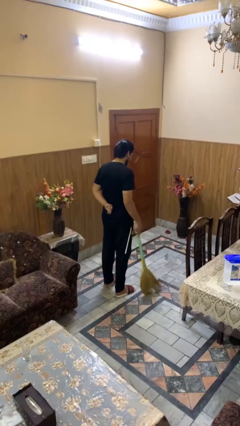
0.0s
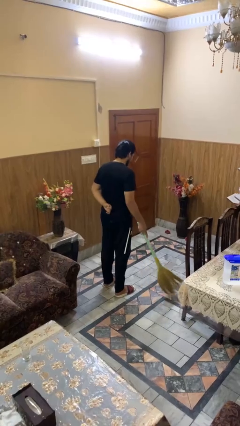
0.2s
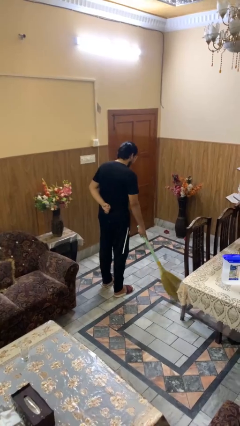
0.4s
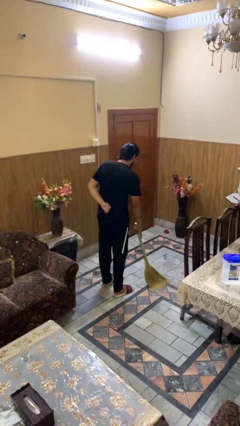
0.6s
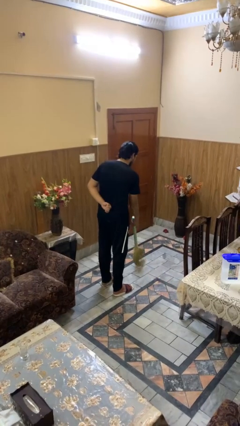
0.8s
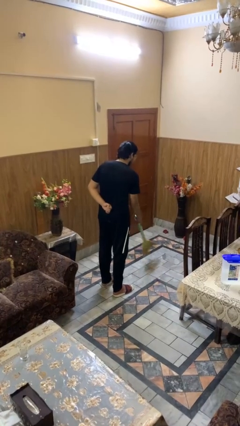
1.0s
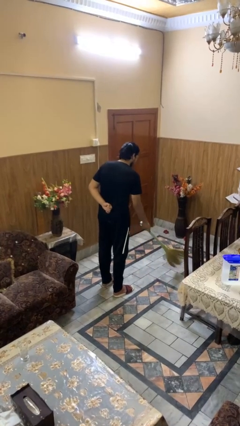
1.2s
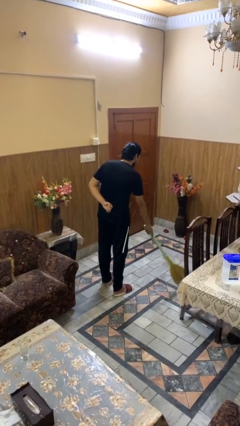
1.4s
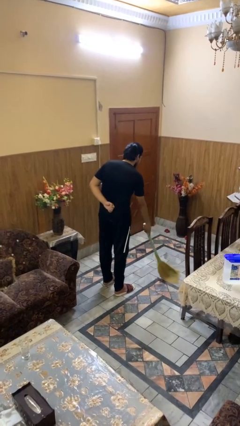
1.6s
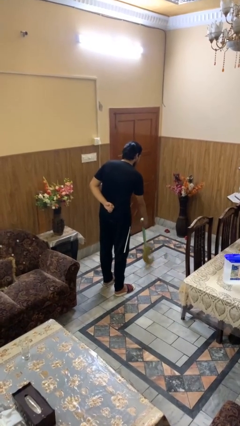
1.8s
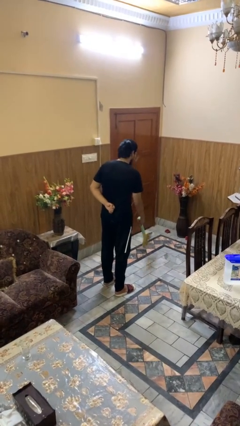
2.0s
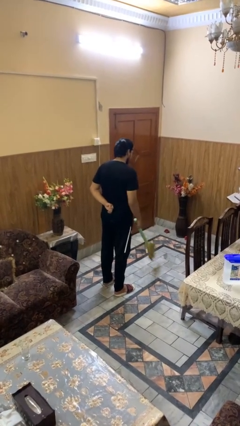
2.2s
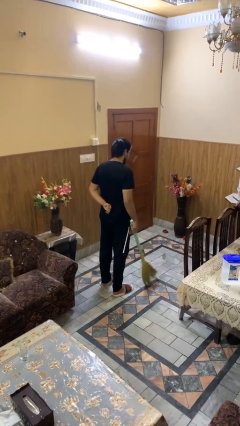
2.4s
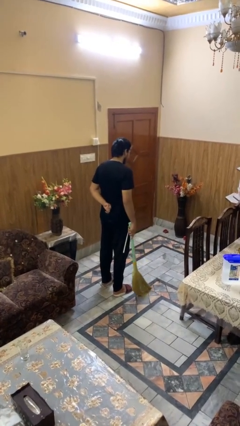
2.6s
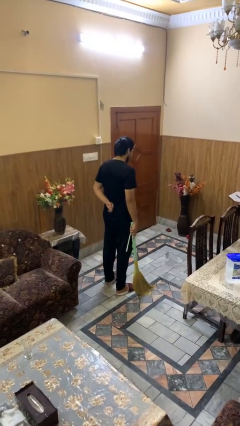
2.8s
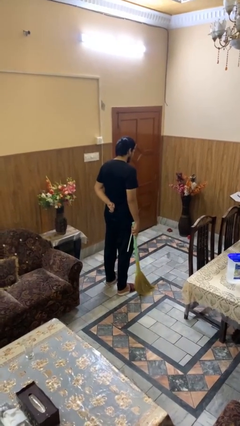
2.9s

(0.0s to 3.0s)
person sweeps floor

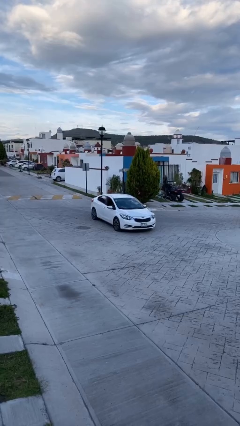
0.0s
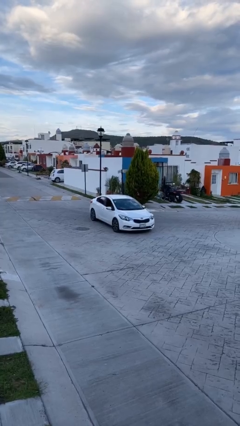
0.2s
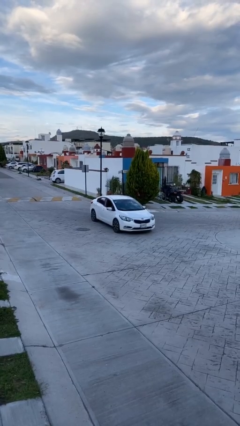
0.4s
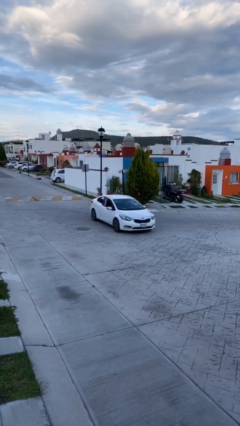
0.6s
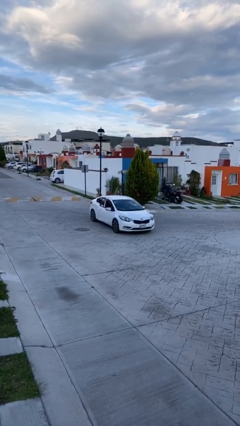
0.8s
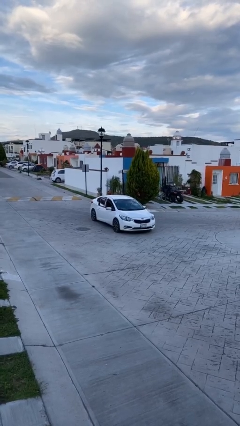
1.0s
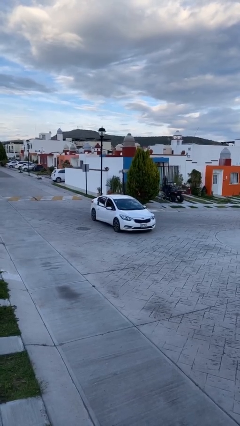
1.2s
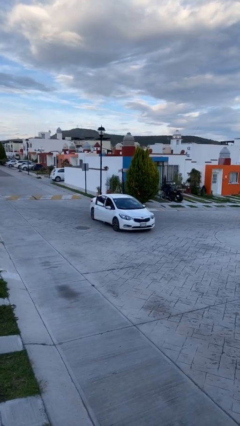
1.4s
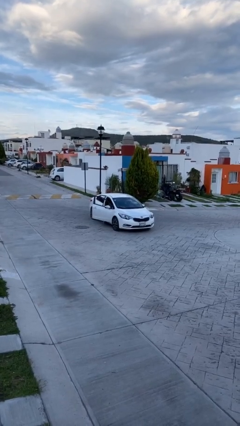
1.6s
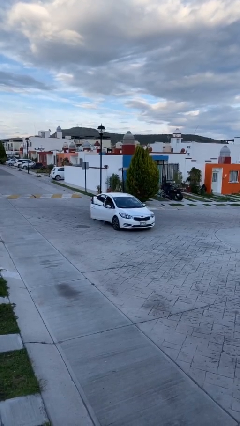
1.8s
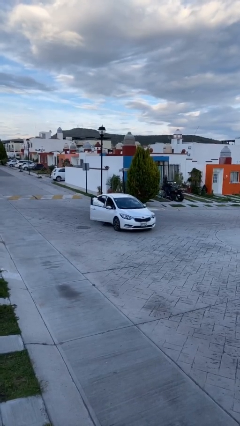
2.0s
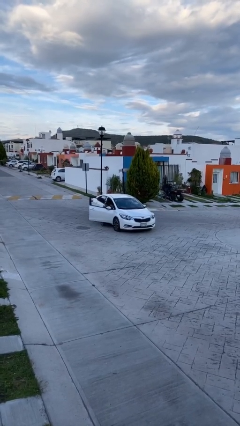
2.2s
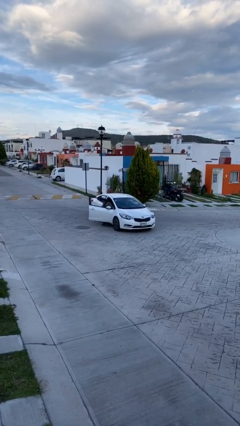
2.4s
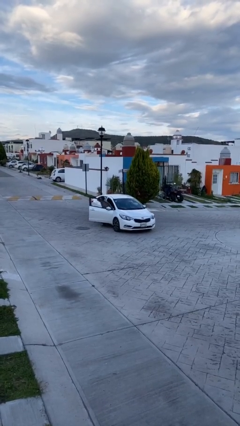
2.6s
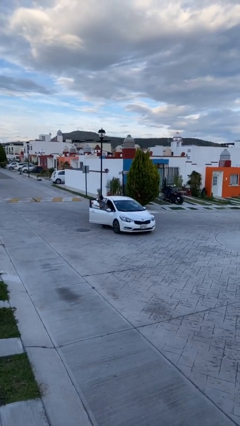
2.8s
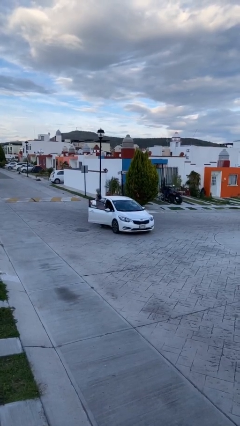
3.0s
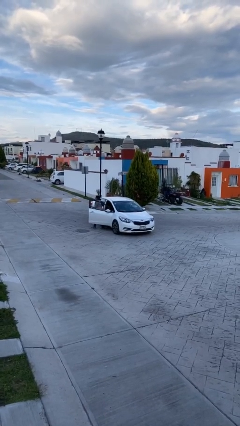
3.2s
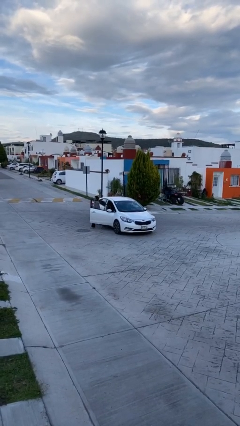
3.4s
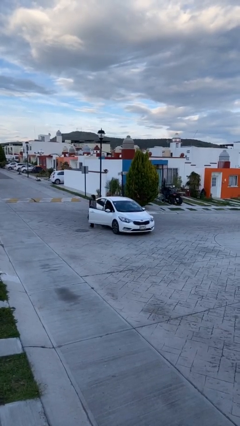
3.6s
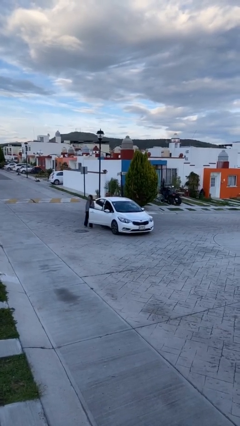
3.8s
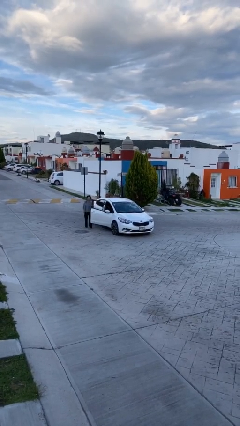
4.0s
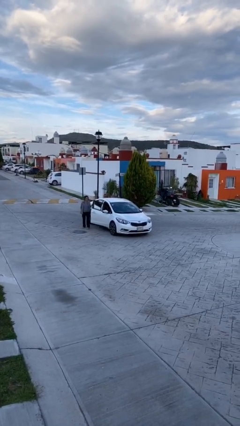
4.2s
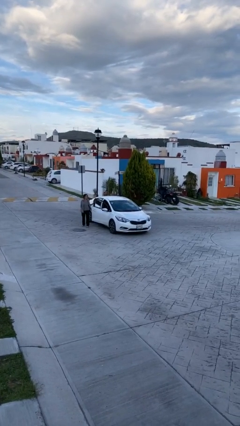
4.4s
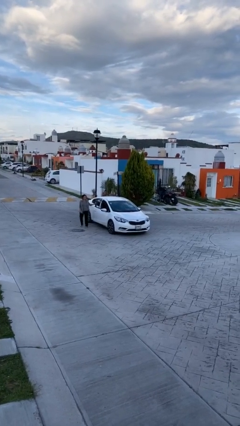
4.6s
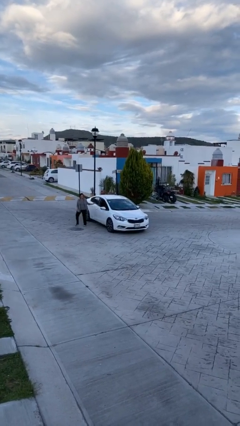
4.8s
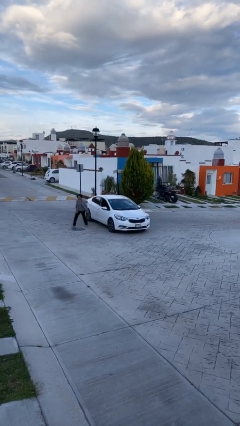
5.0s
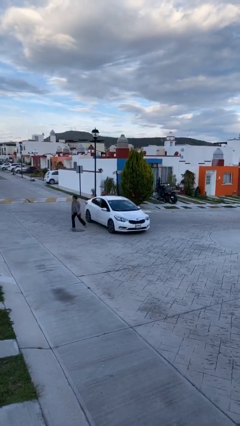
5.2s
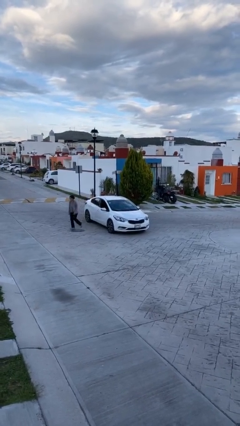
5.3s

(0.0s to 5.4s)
car drops off person

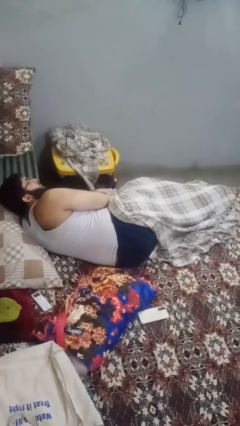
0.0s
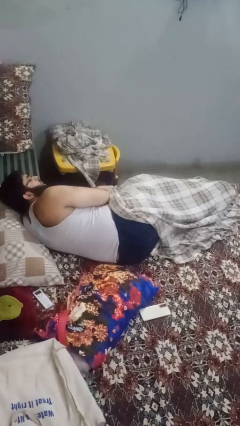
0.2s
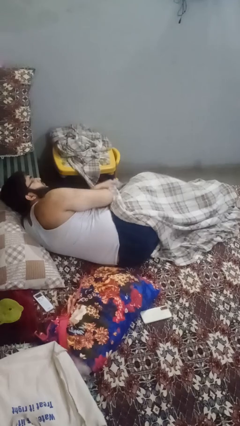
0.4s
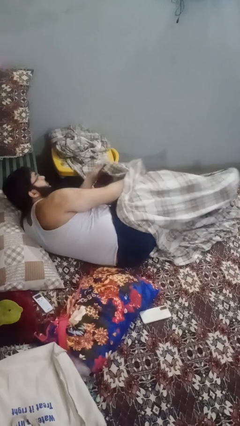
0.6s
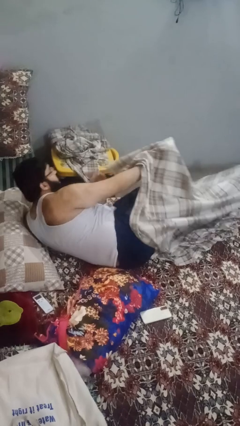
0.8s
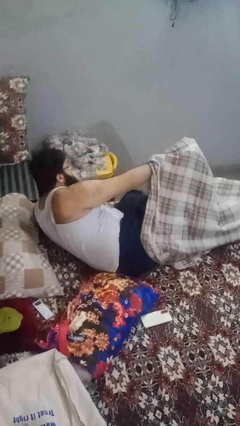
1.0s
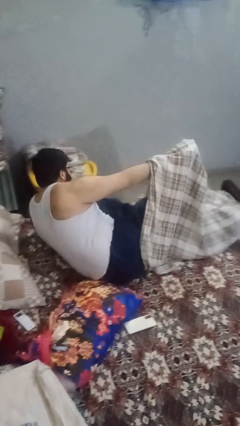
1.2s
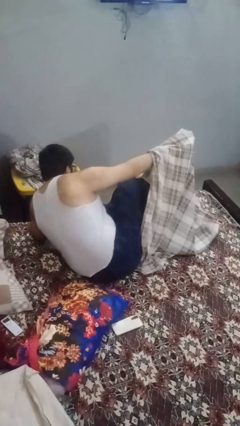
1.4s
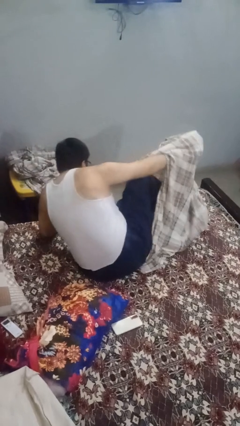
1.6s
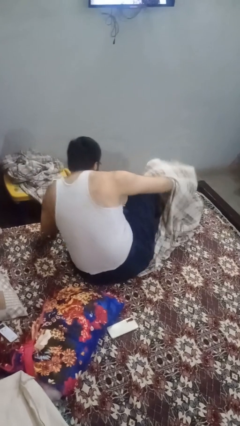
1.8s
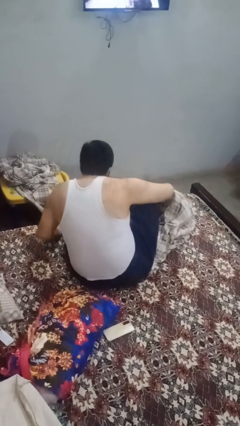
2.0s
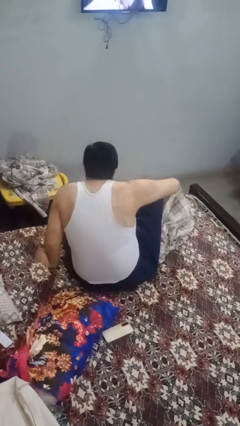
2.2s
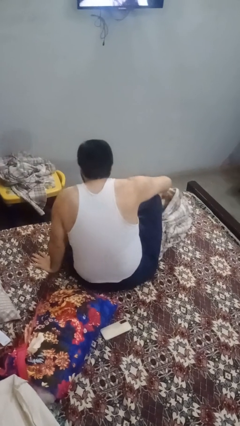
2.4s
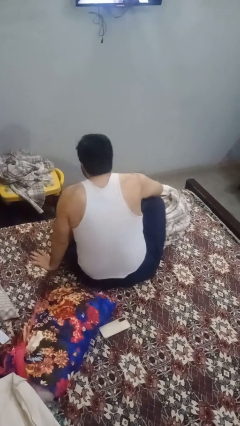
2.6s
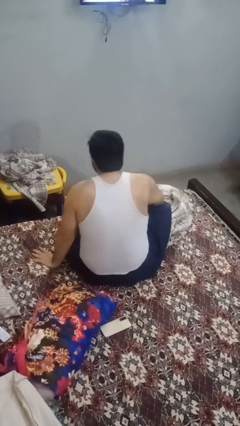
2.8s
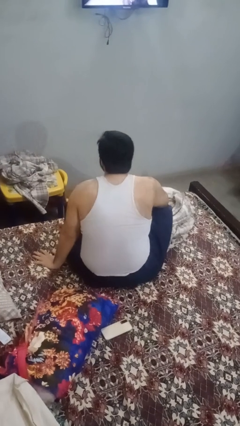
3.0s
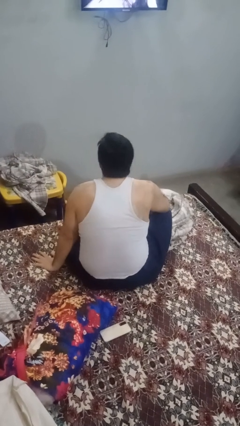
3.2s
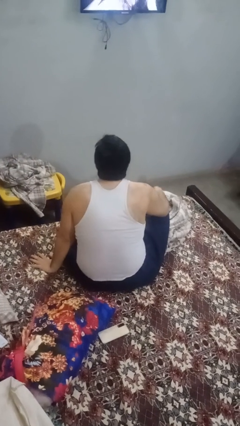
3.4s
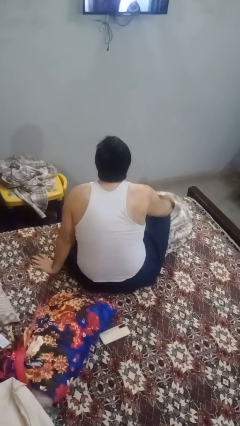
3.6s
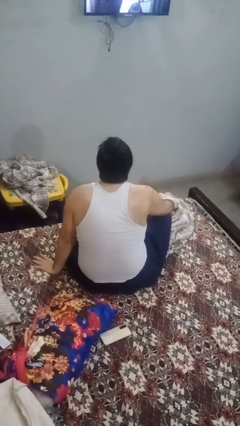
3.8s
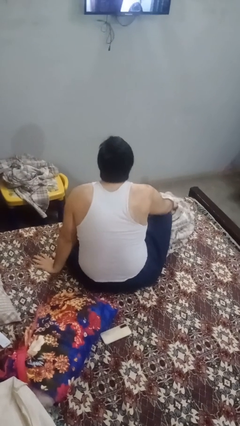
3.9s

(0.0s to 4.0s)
person uncovers with blanket

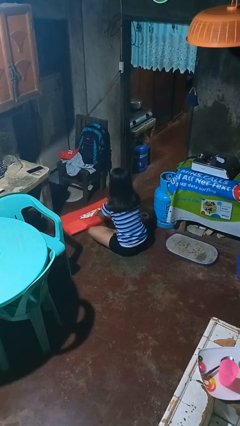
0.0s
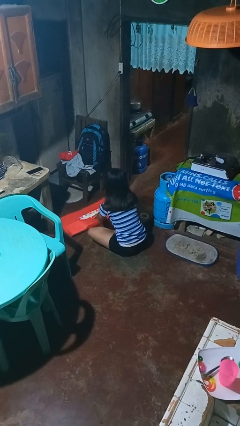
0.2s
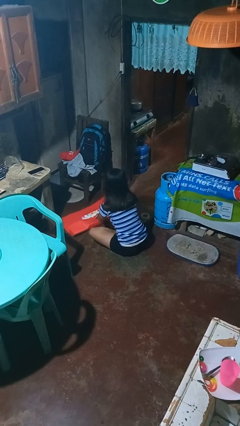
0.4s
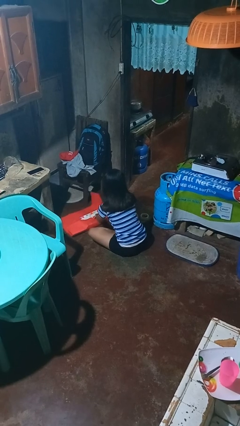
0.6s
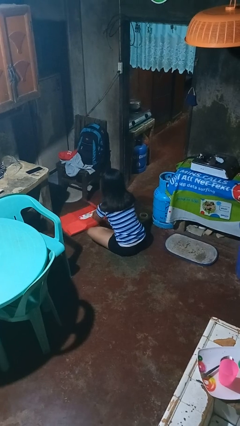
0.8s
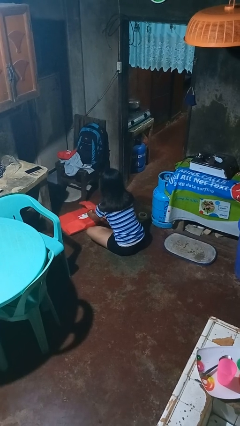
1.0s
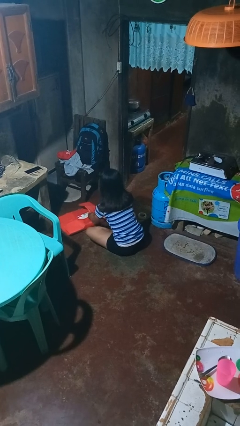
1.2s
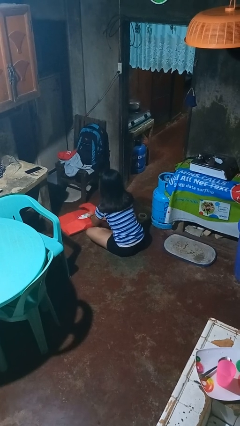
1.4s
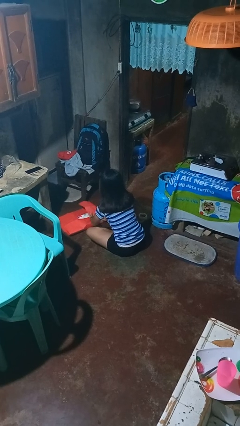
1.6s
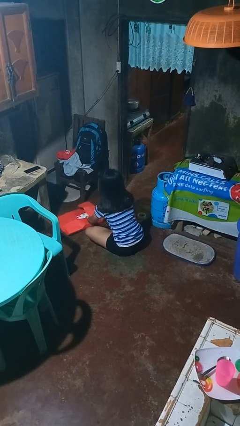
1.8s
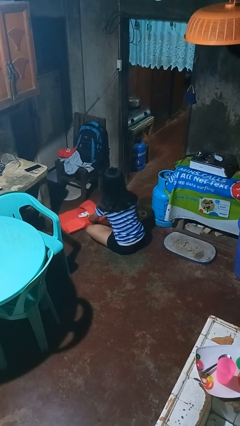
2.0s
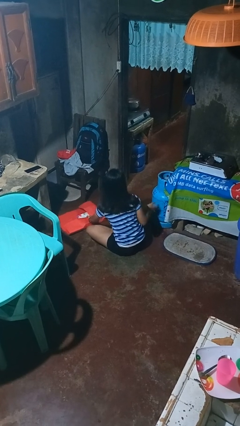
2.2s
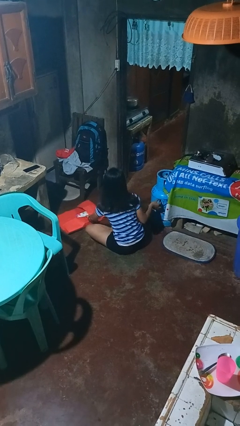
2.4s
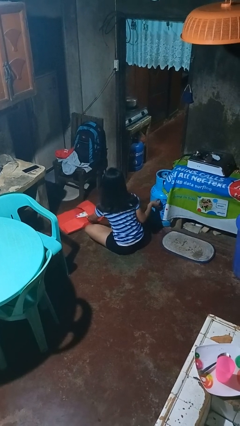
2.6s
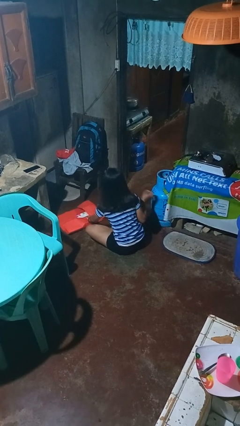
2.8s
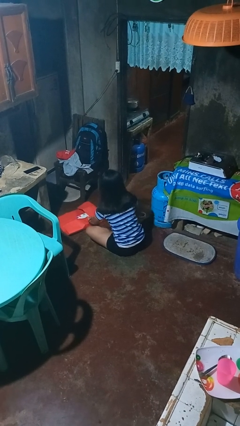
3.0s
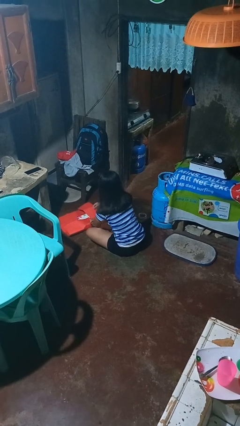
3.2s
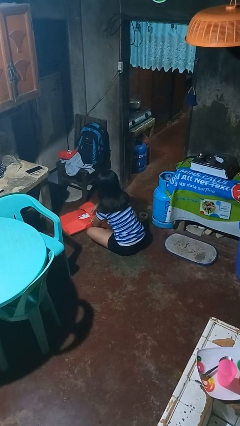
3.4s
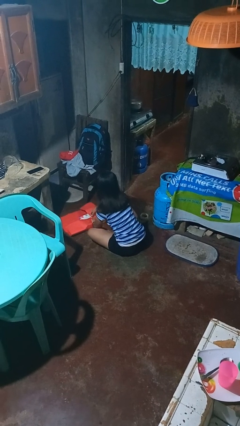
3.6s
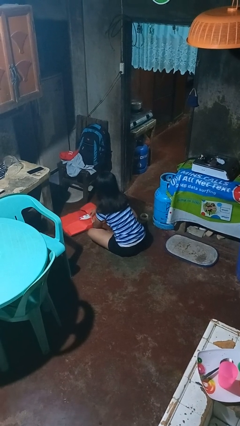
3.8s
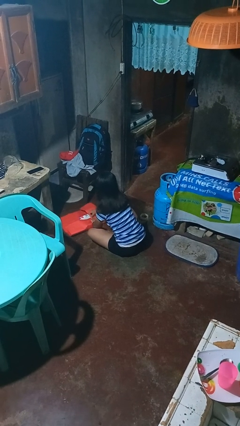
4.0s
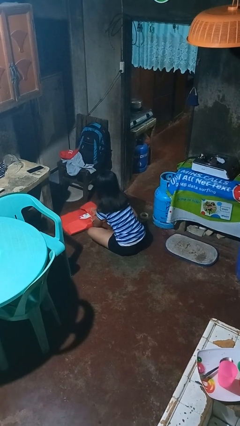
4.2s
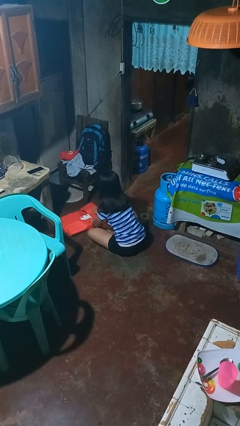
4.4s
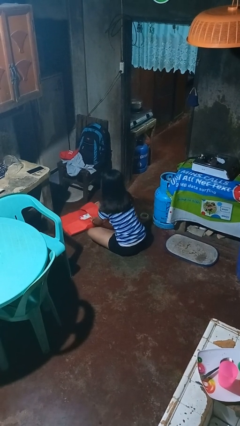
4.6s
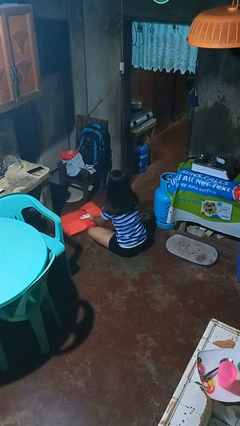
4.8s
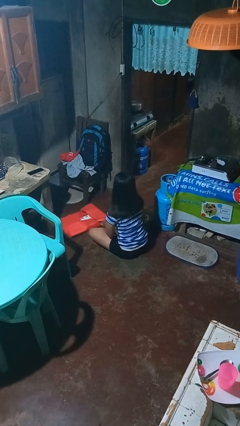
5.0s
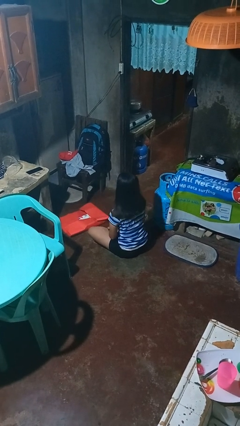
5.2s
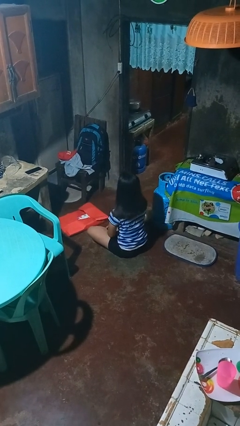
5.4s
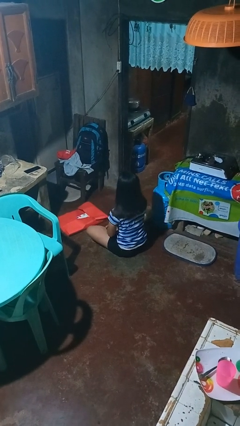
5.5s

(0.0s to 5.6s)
person wraps box
